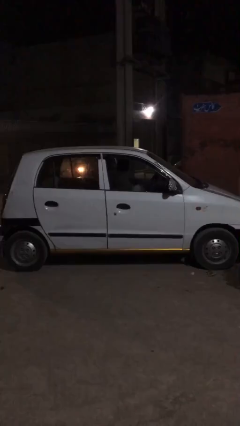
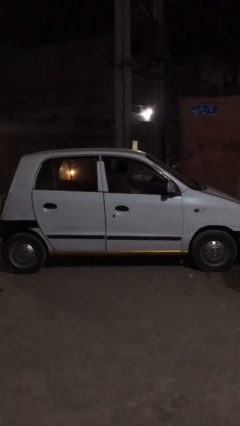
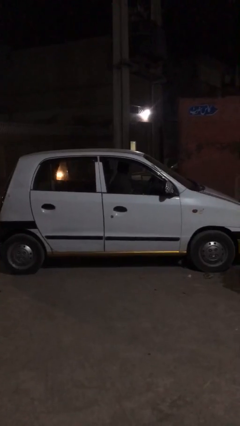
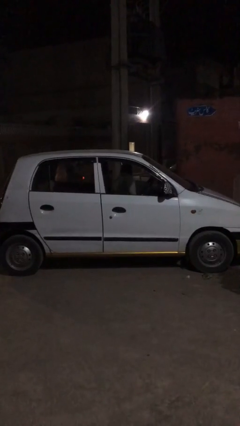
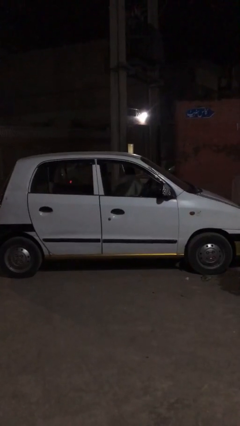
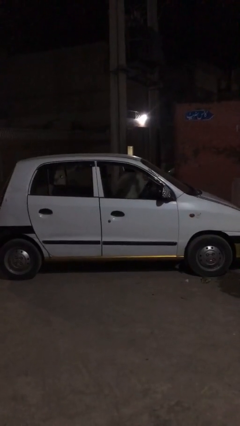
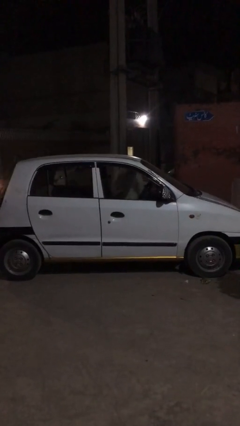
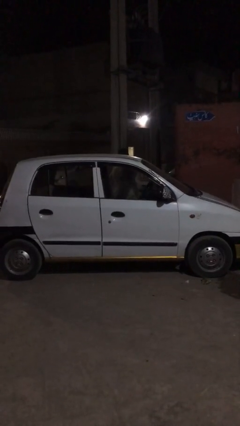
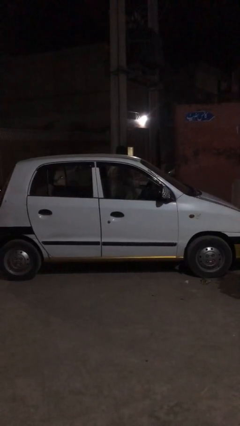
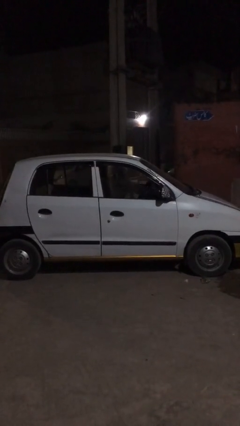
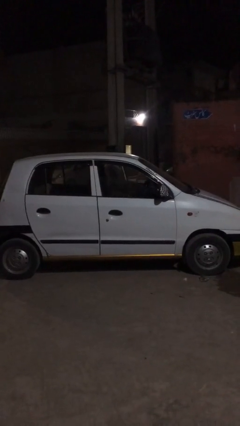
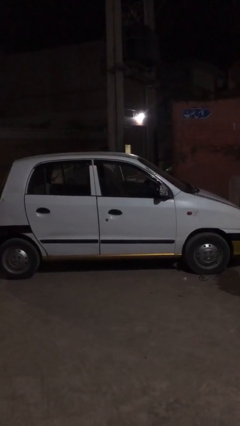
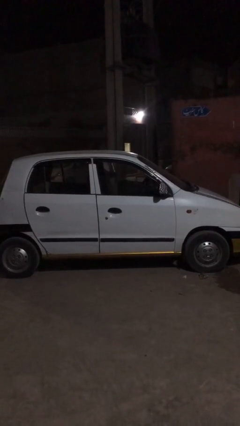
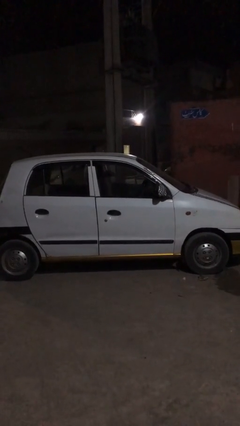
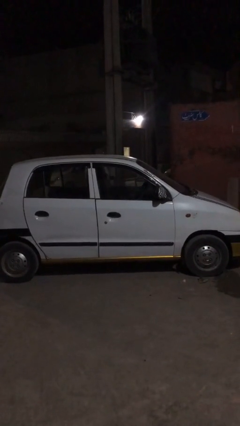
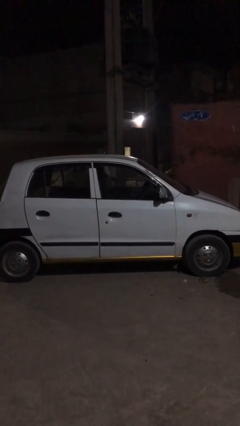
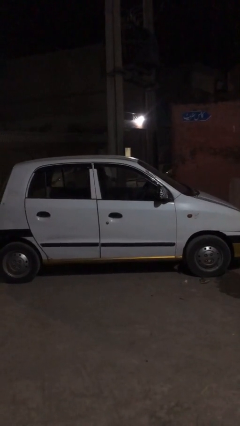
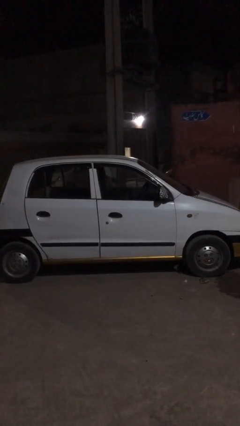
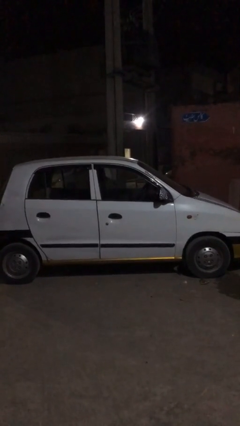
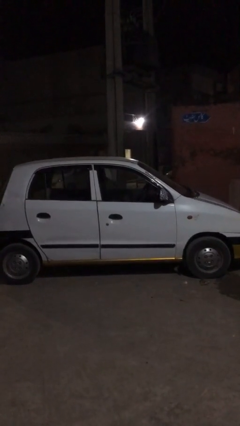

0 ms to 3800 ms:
car drops off person

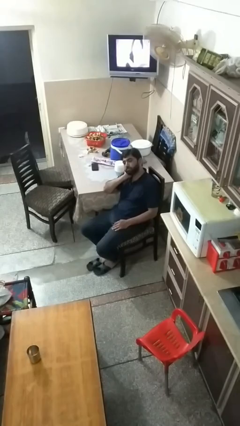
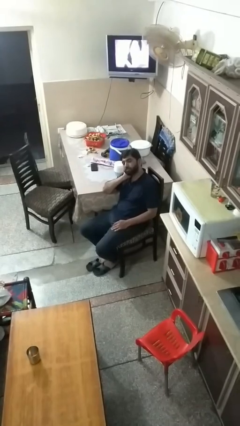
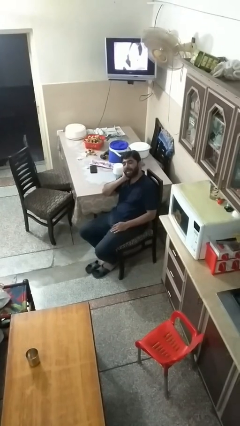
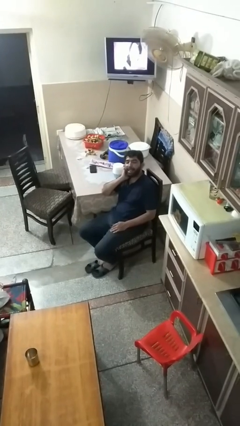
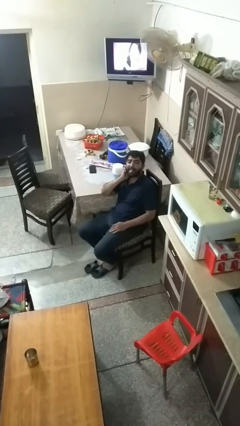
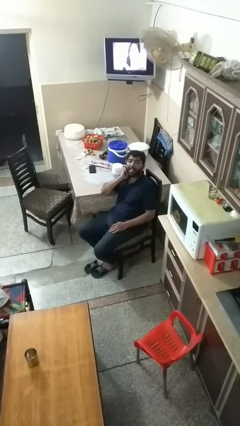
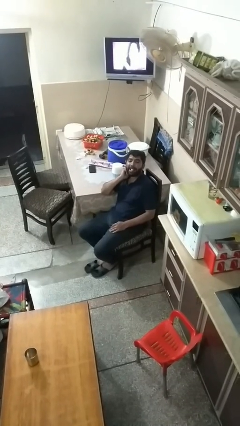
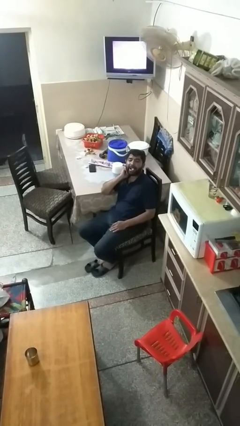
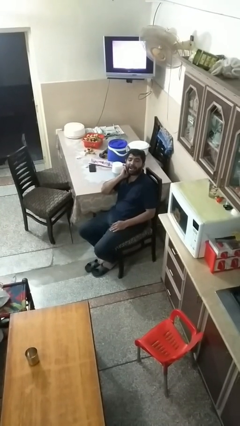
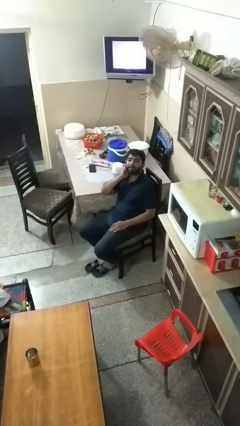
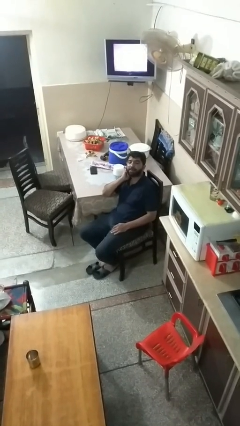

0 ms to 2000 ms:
person sticks out tongue

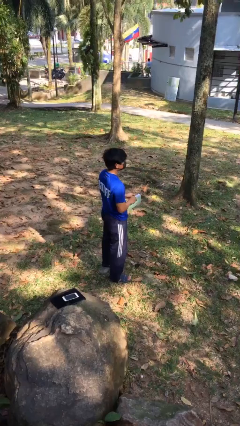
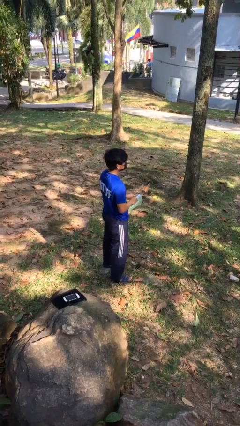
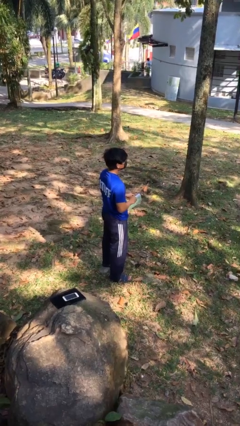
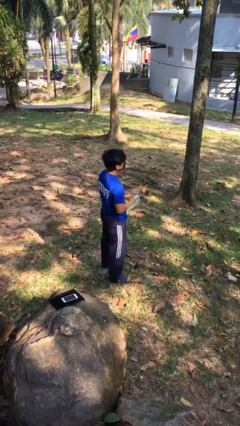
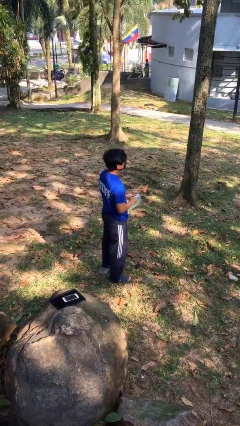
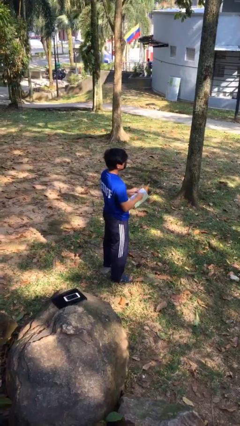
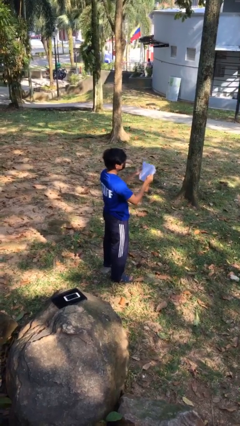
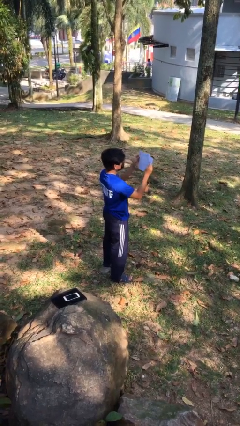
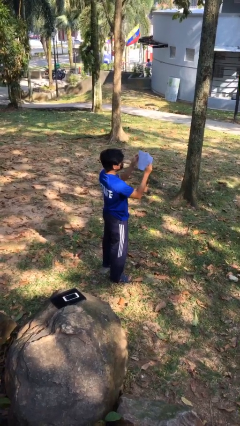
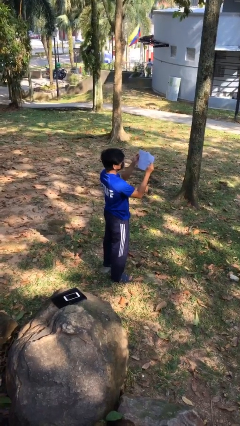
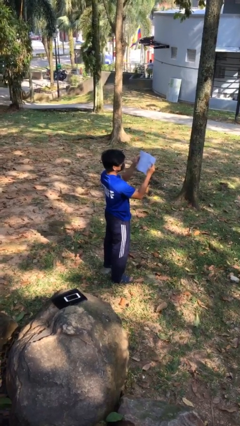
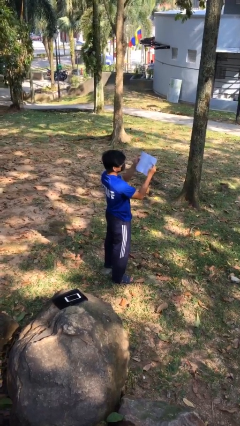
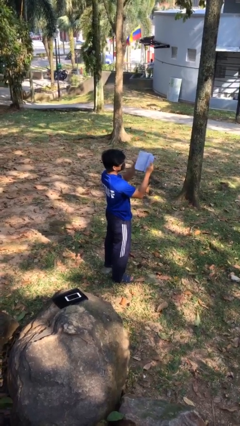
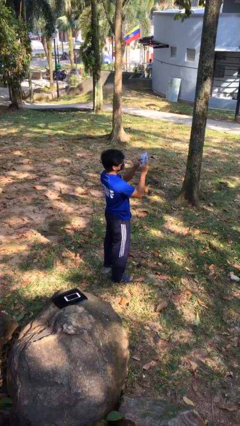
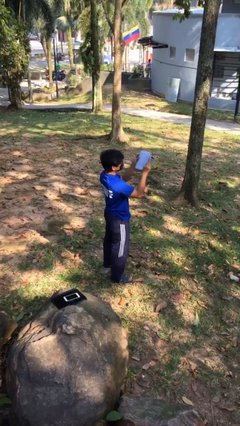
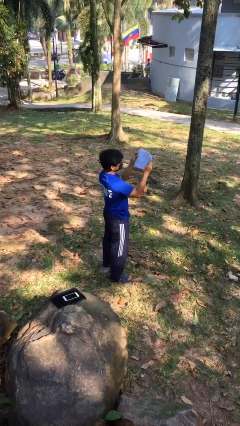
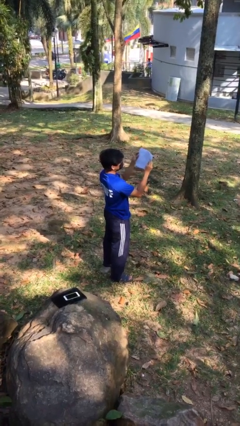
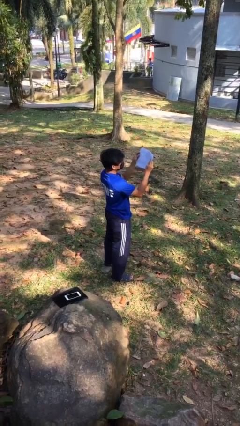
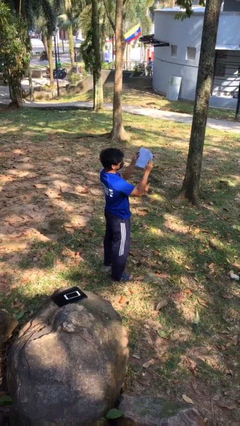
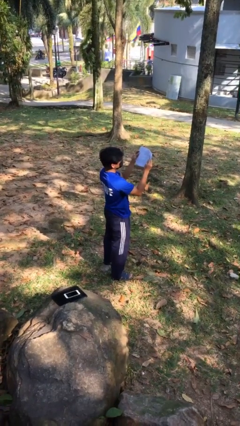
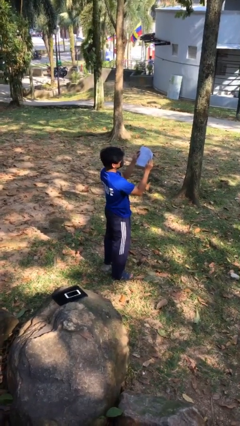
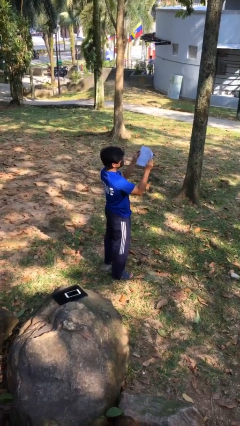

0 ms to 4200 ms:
person reads document

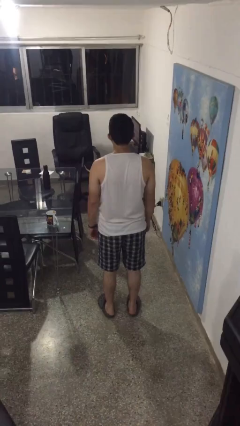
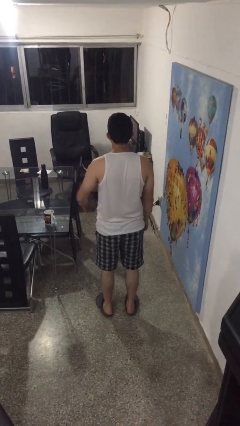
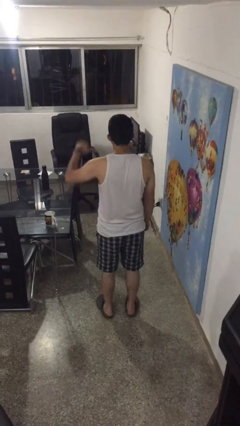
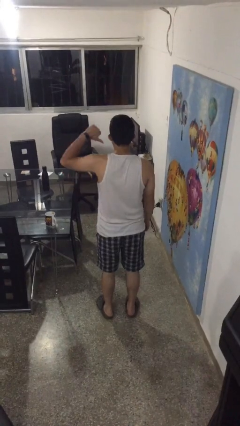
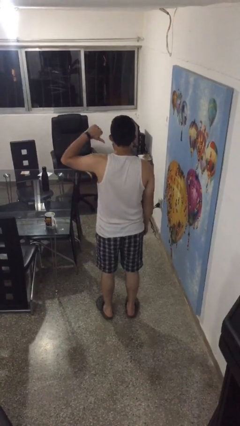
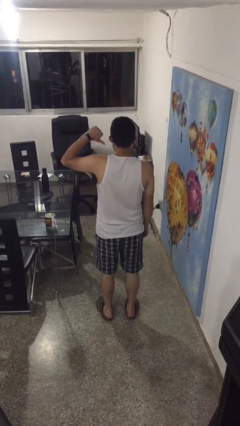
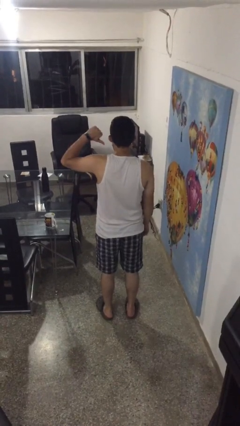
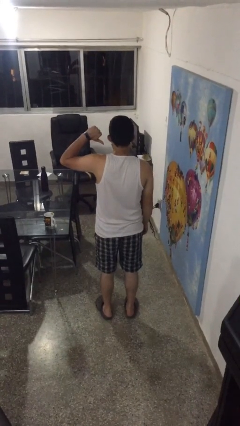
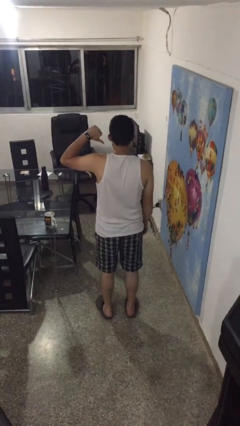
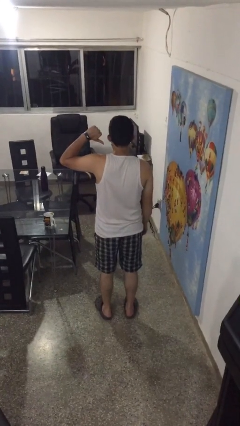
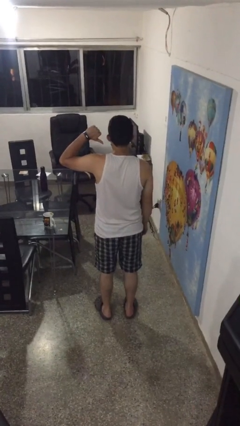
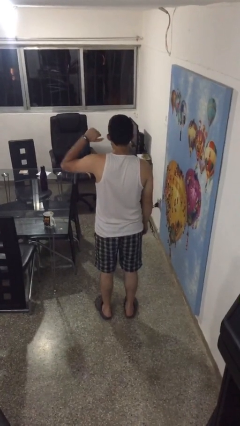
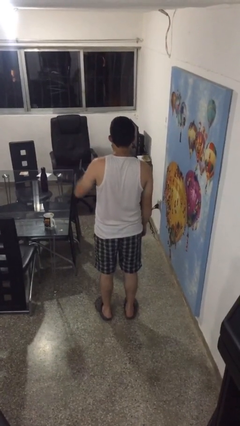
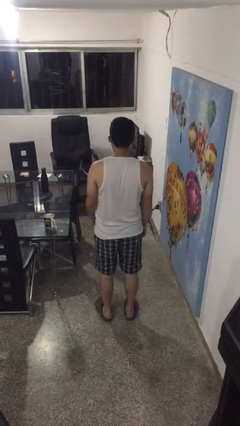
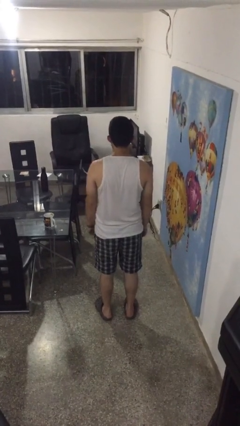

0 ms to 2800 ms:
person gestures thumbs down

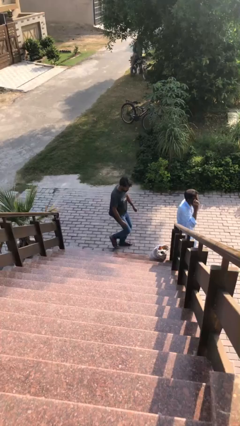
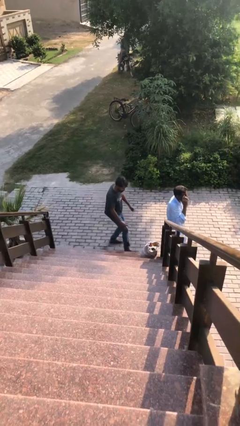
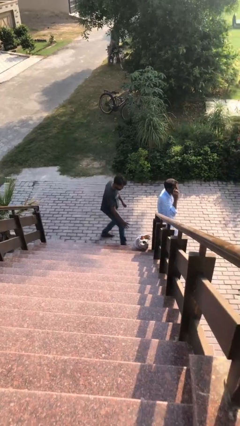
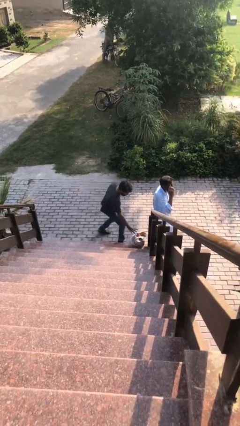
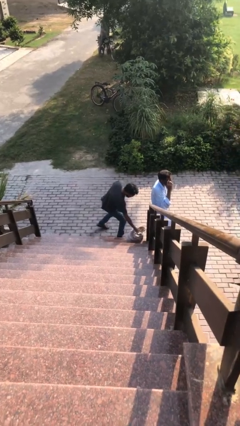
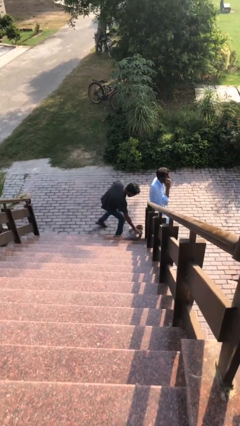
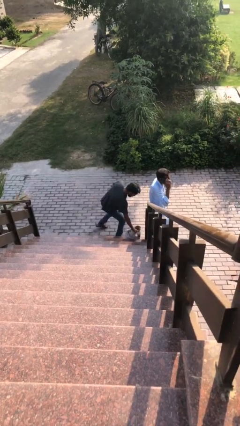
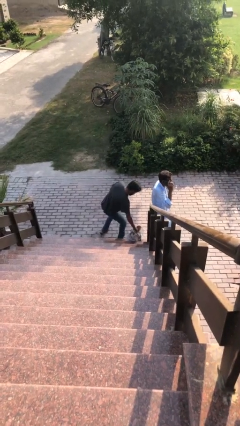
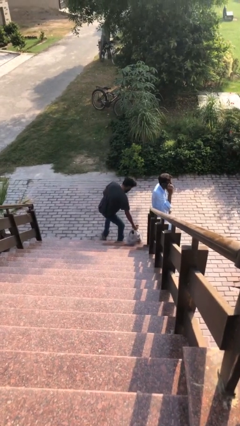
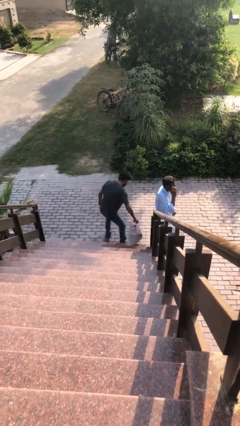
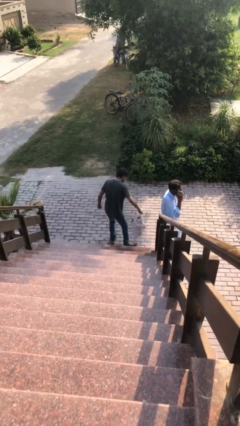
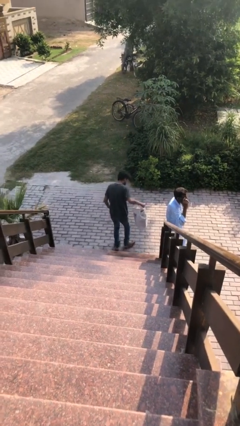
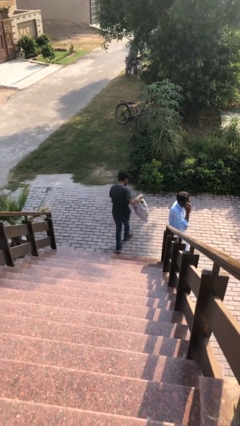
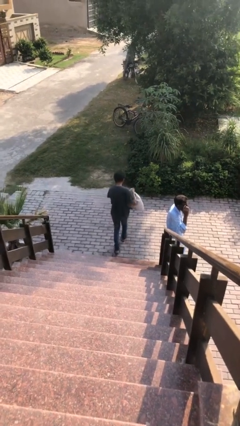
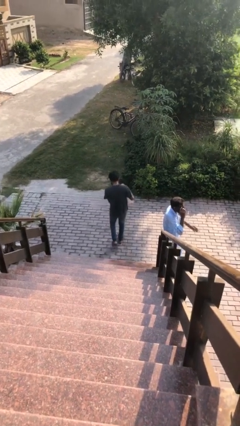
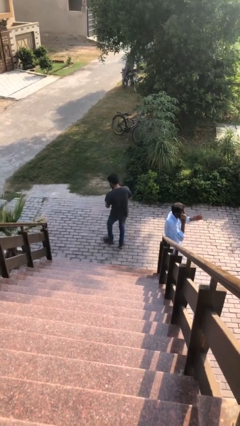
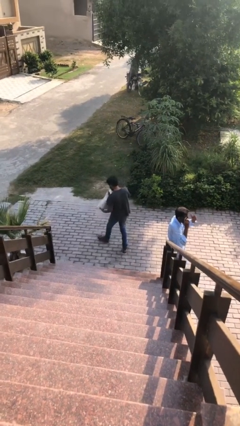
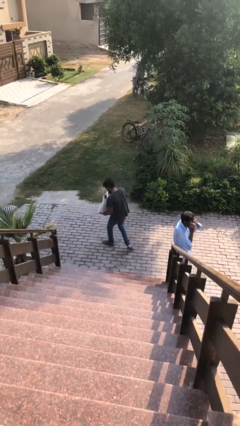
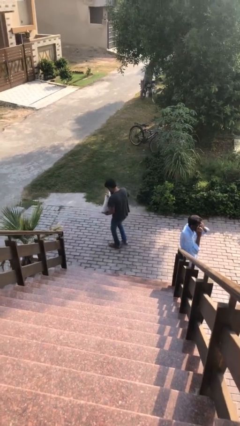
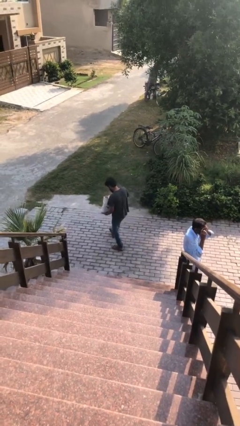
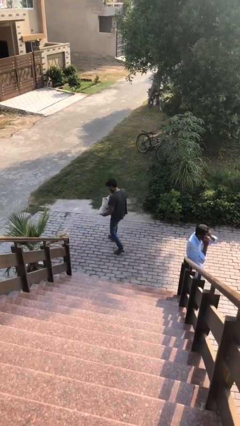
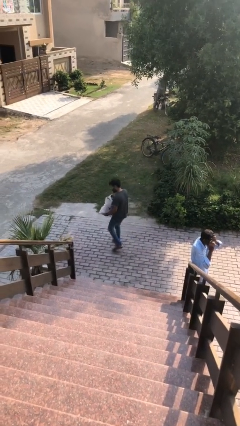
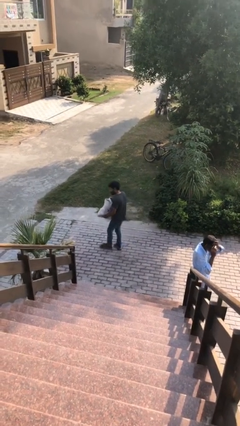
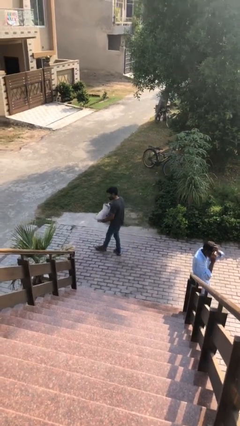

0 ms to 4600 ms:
person steals object from person

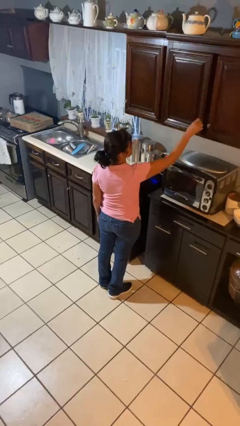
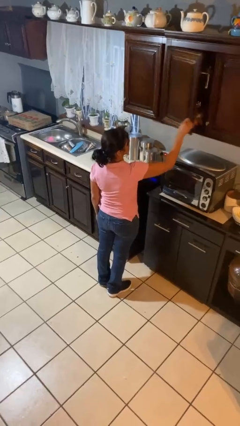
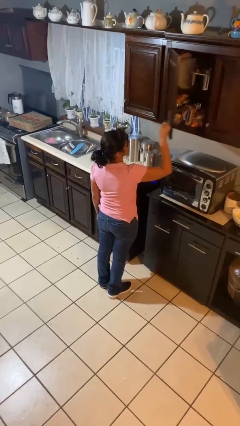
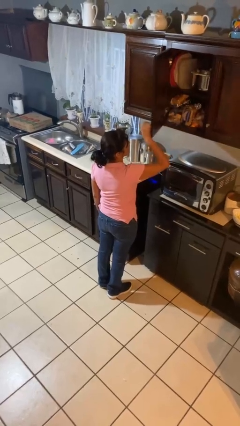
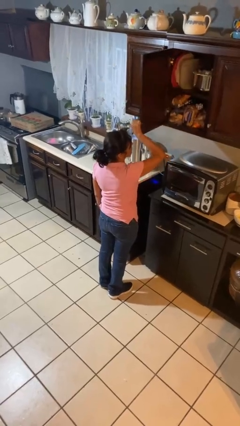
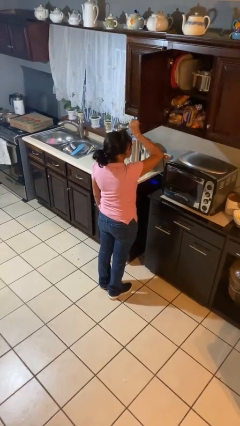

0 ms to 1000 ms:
person opens cabinet
